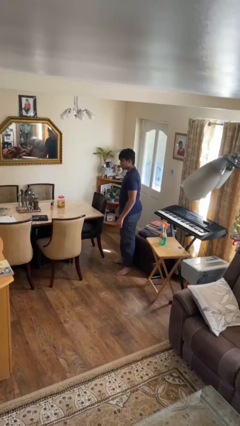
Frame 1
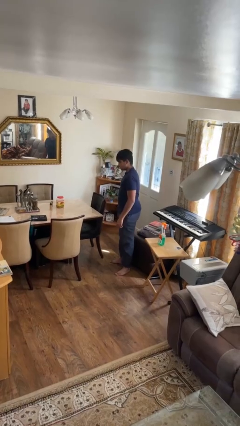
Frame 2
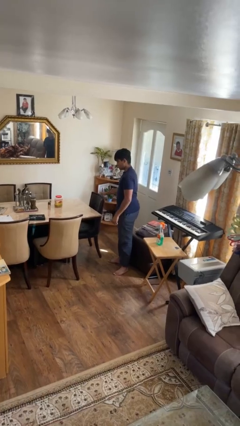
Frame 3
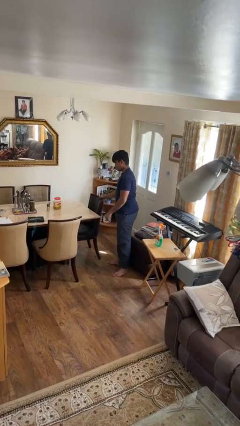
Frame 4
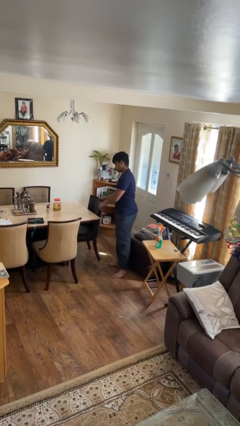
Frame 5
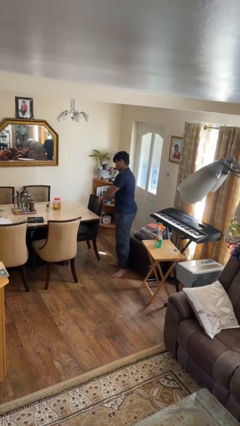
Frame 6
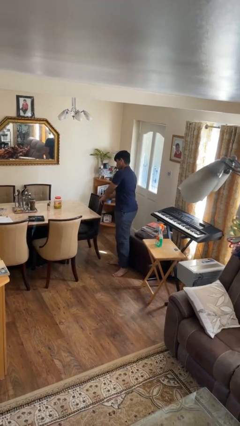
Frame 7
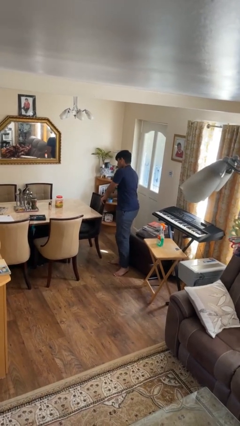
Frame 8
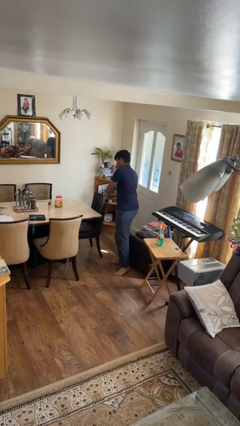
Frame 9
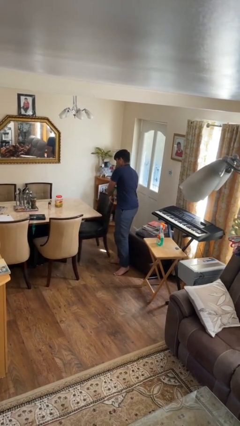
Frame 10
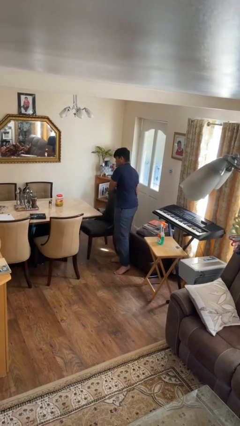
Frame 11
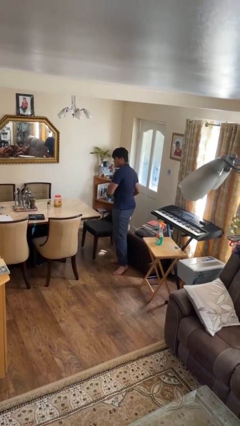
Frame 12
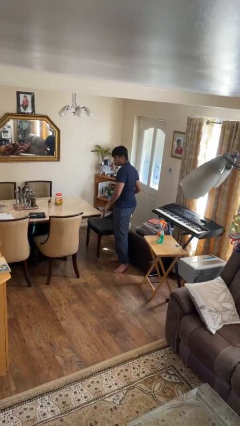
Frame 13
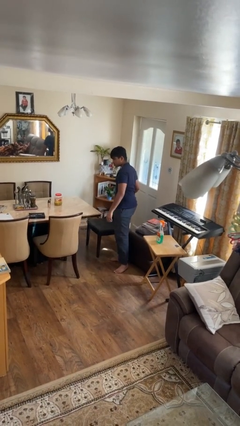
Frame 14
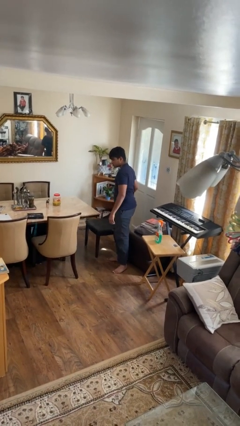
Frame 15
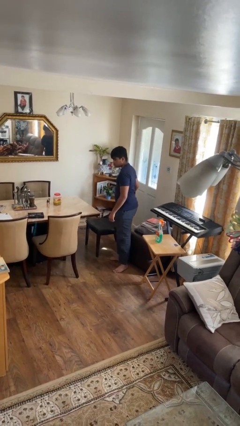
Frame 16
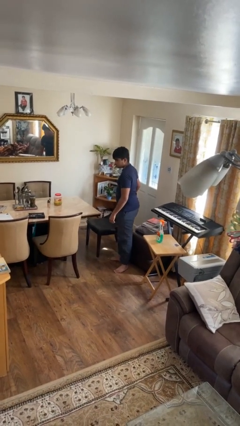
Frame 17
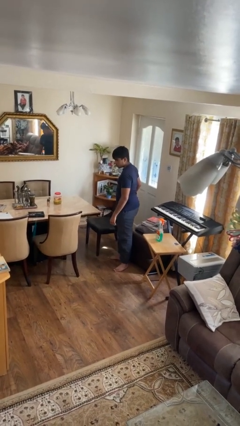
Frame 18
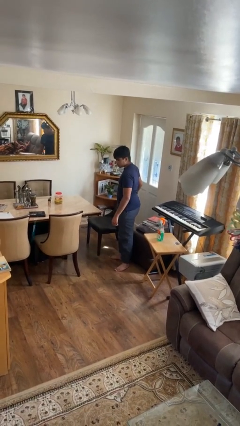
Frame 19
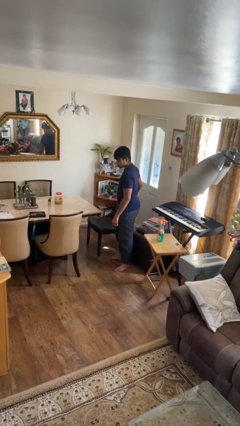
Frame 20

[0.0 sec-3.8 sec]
person pulls out chair

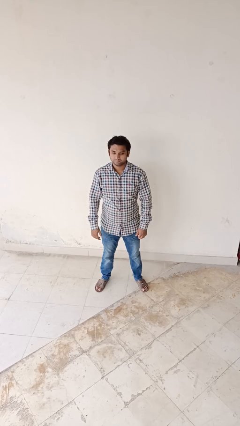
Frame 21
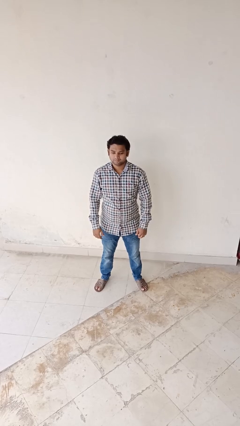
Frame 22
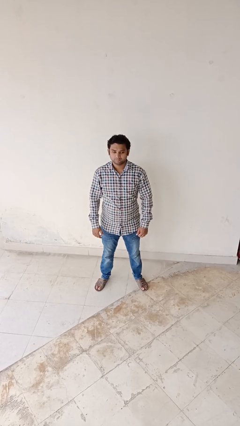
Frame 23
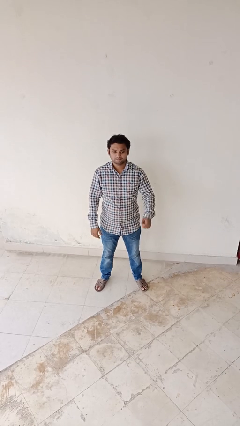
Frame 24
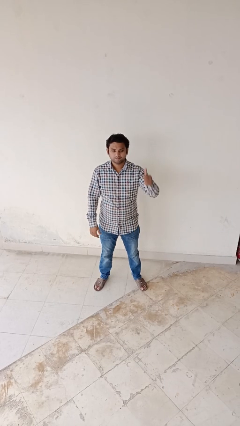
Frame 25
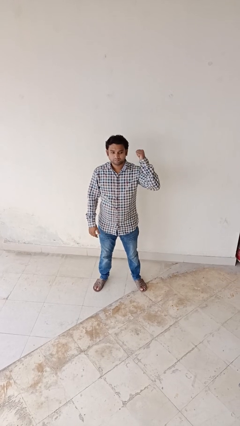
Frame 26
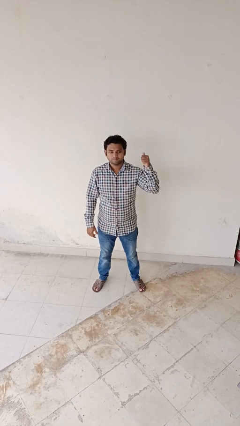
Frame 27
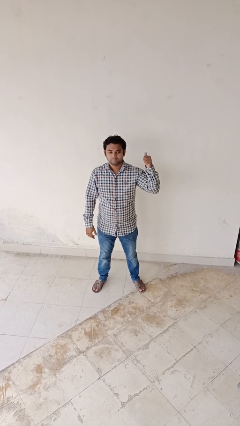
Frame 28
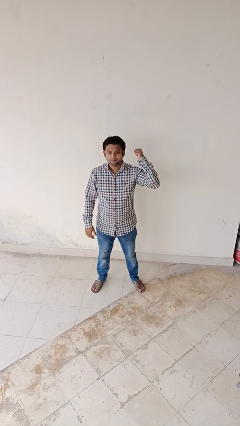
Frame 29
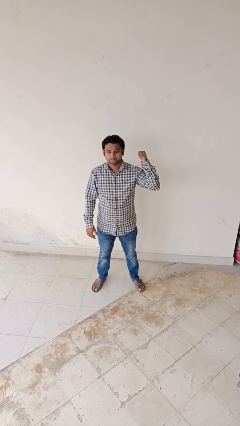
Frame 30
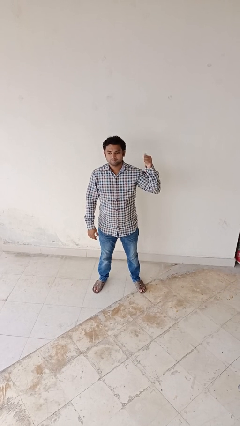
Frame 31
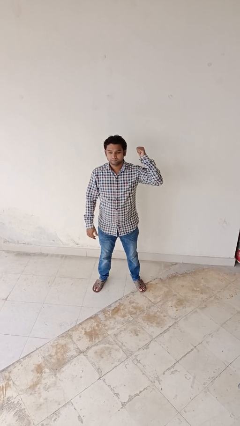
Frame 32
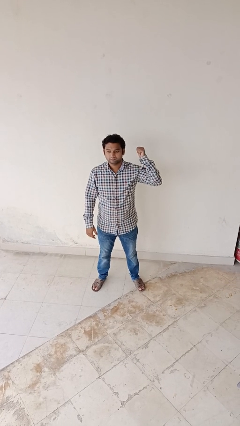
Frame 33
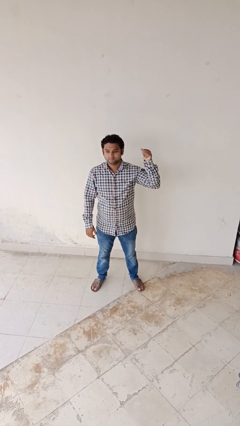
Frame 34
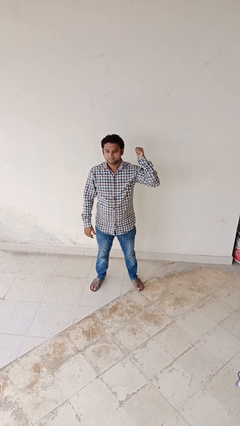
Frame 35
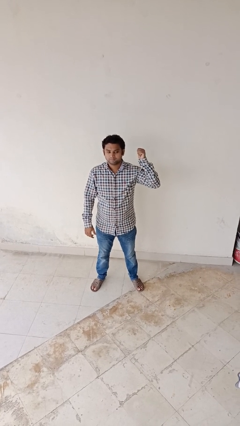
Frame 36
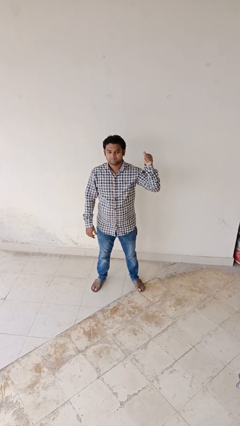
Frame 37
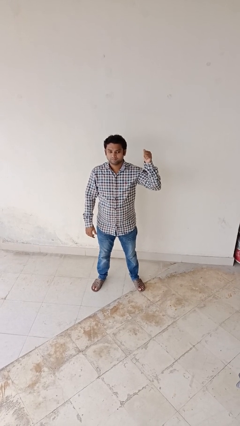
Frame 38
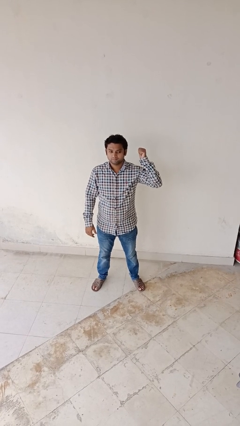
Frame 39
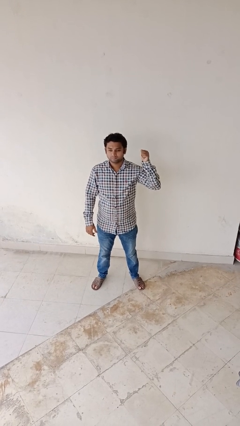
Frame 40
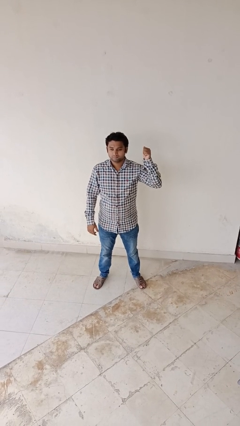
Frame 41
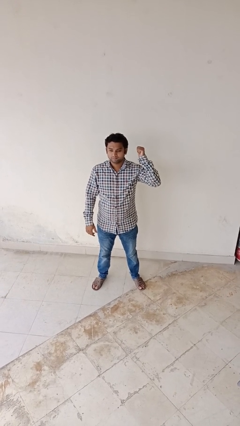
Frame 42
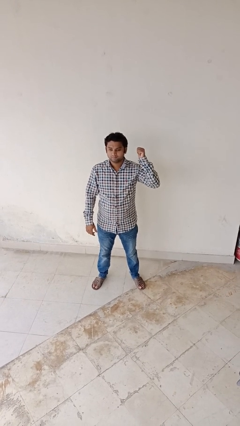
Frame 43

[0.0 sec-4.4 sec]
person gestures behind me

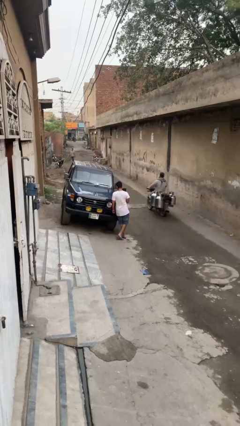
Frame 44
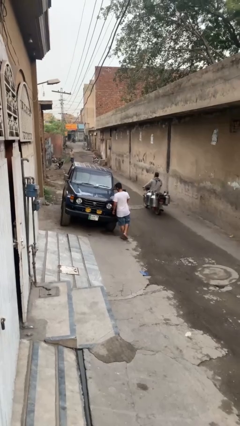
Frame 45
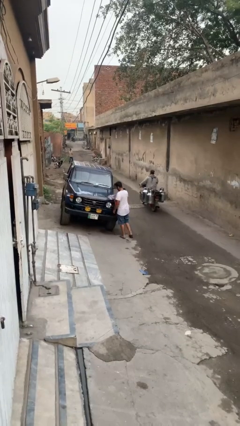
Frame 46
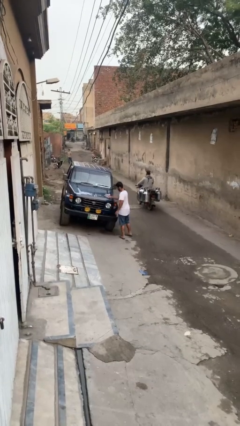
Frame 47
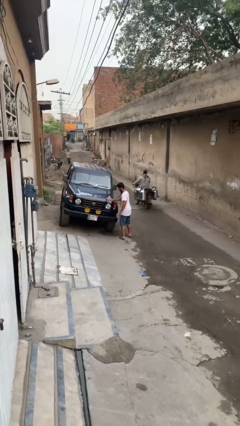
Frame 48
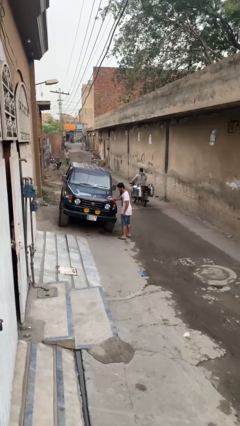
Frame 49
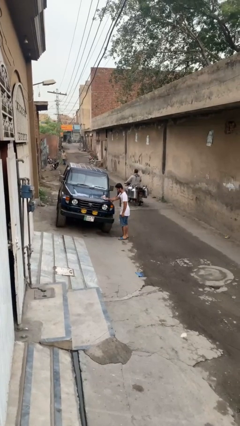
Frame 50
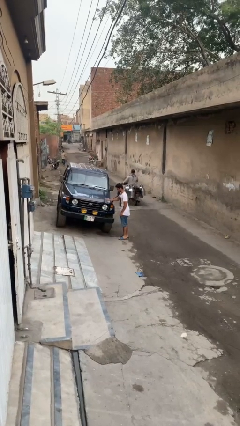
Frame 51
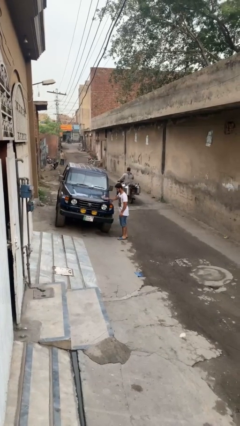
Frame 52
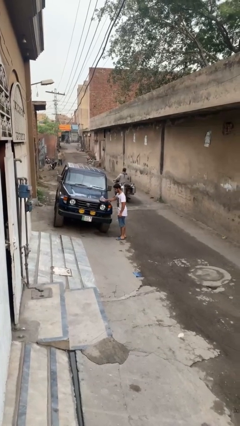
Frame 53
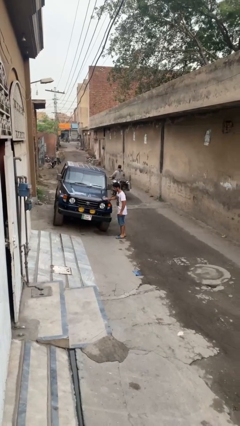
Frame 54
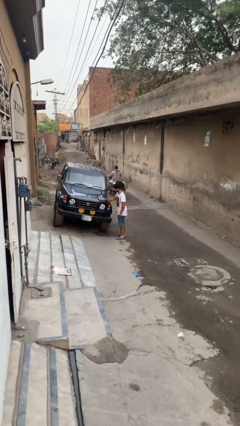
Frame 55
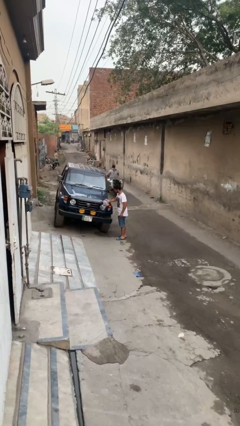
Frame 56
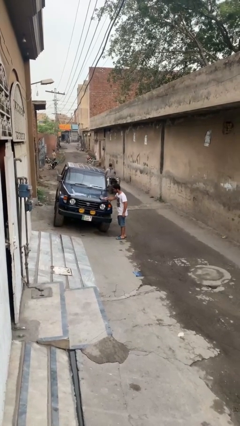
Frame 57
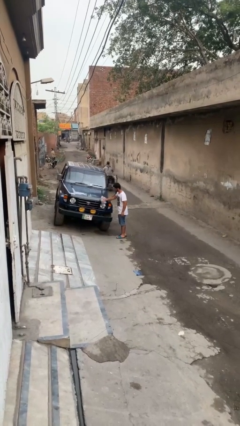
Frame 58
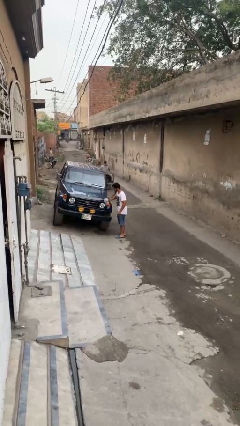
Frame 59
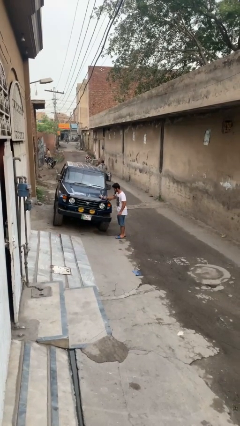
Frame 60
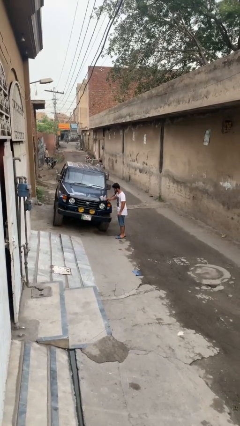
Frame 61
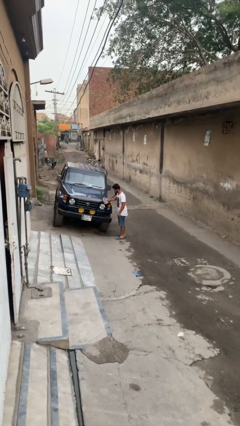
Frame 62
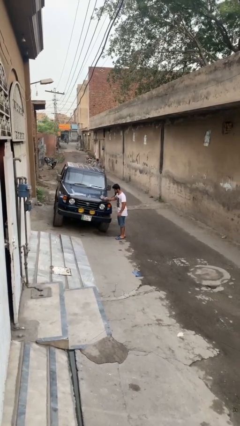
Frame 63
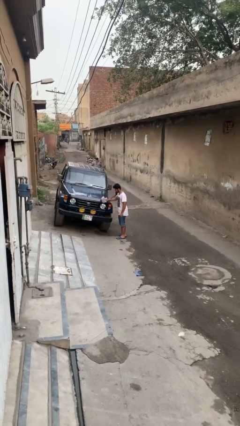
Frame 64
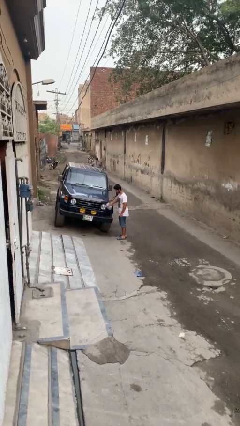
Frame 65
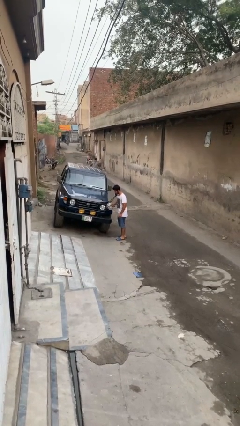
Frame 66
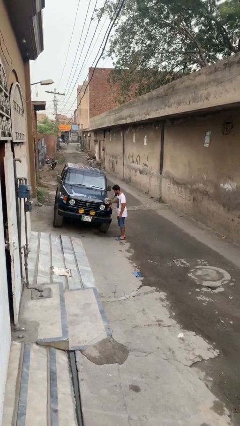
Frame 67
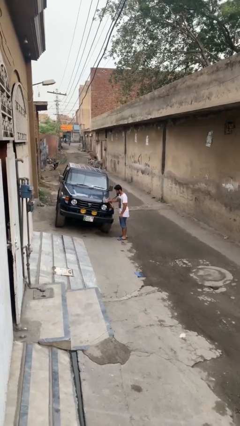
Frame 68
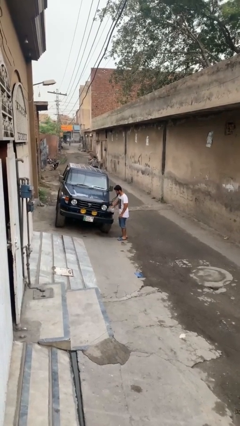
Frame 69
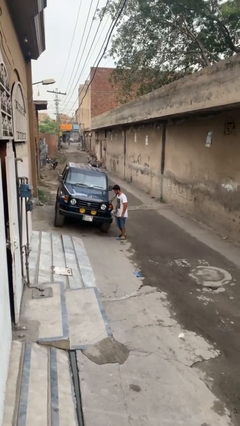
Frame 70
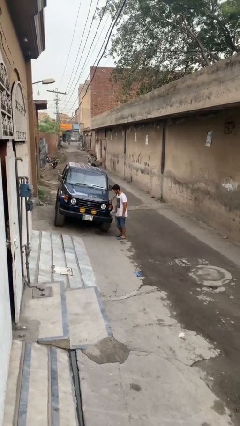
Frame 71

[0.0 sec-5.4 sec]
person polishes car with rag

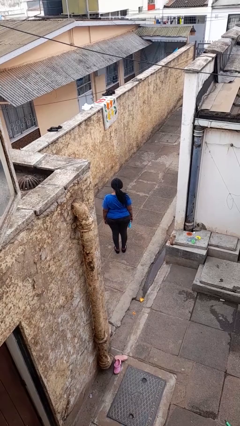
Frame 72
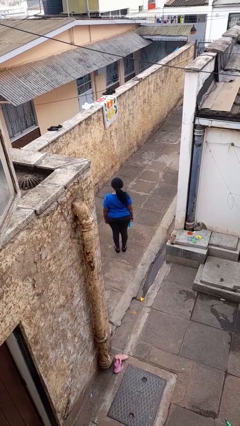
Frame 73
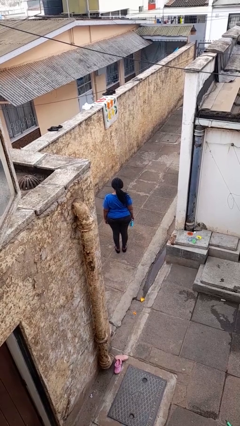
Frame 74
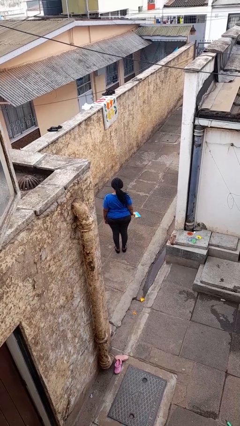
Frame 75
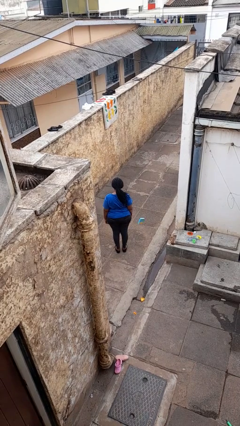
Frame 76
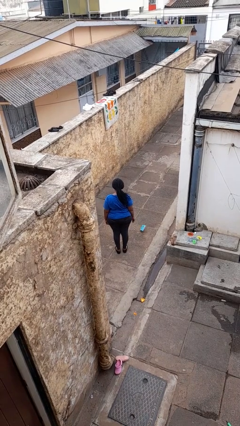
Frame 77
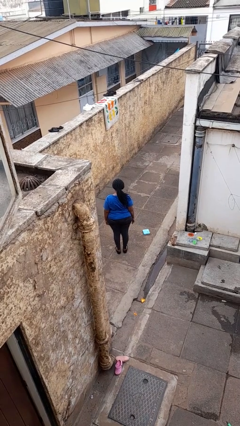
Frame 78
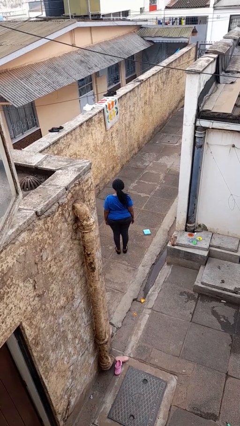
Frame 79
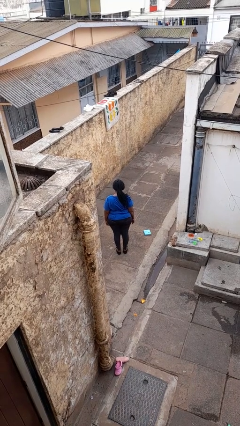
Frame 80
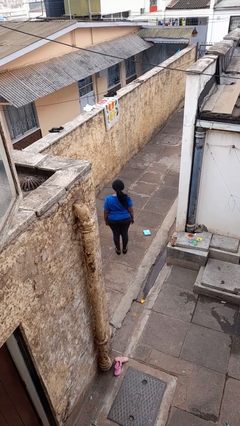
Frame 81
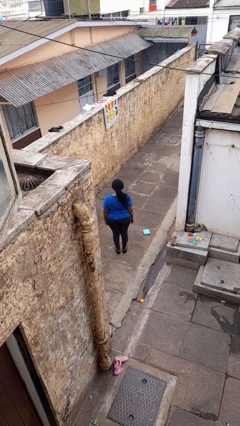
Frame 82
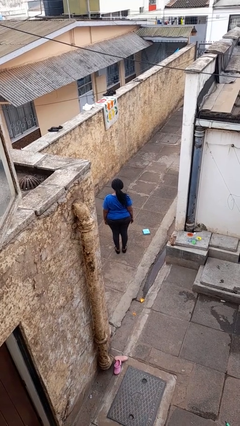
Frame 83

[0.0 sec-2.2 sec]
person throws object to ground

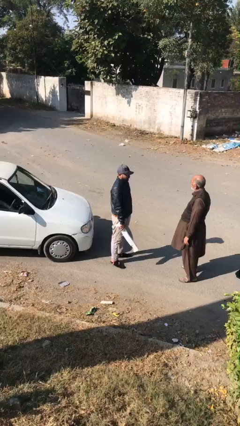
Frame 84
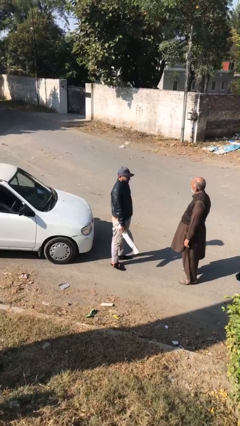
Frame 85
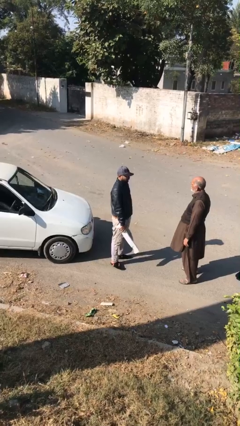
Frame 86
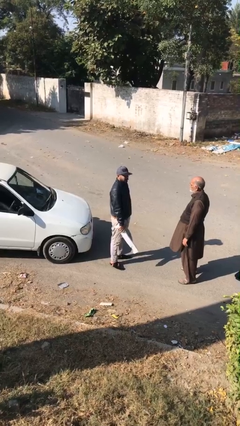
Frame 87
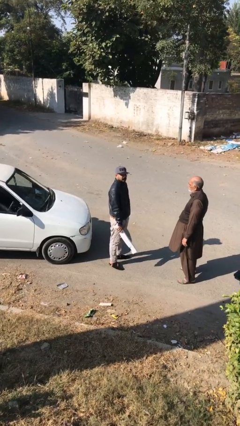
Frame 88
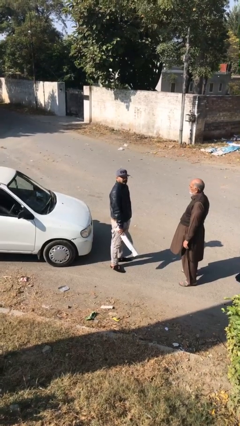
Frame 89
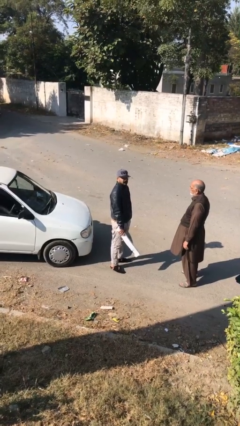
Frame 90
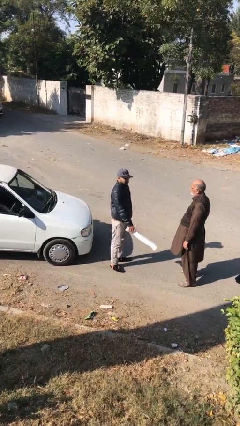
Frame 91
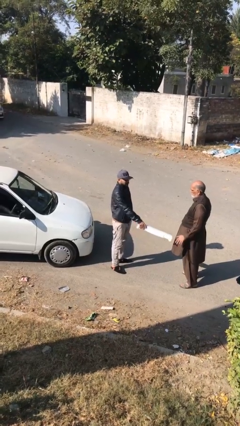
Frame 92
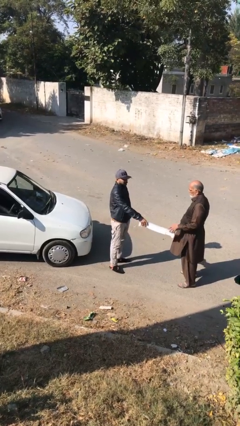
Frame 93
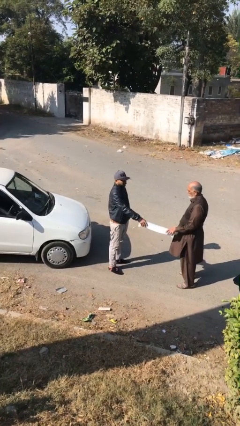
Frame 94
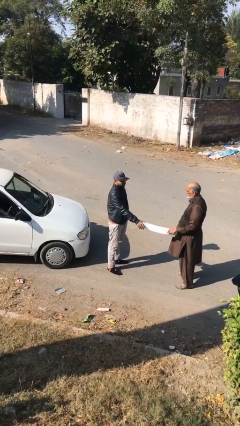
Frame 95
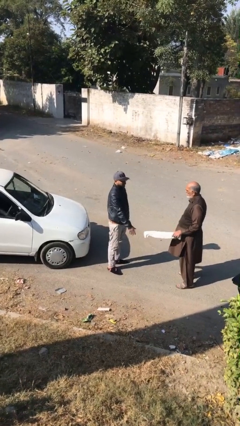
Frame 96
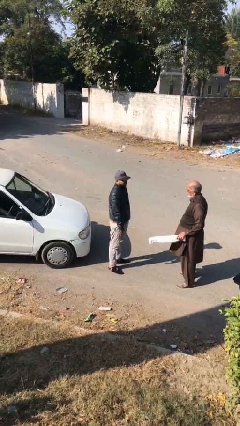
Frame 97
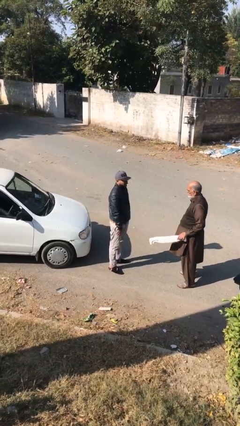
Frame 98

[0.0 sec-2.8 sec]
person transfers object to person
